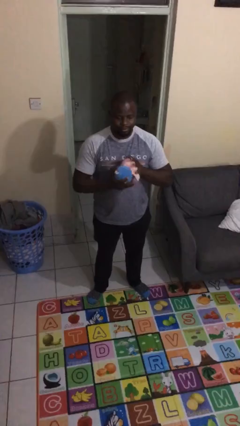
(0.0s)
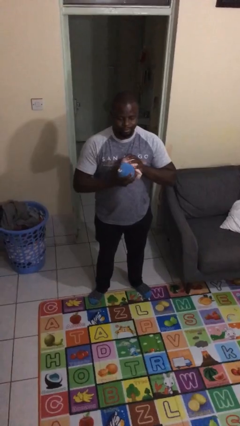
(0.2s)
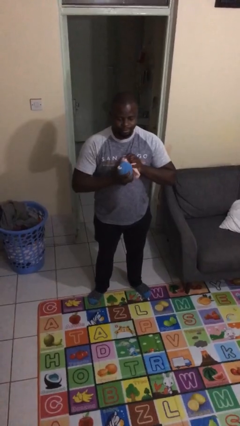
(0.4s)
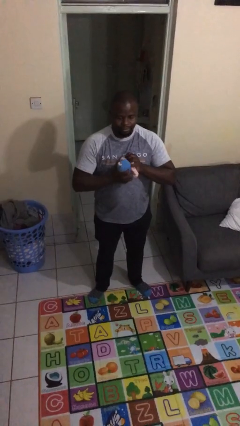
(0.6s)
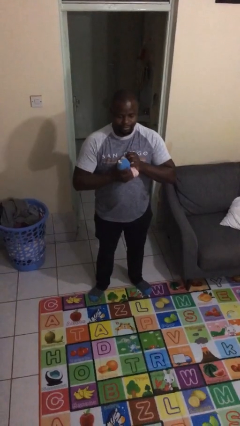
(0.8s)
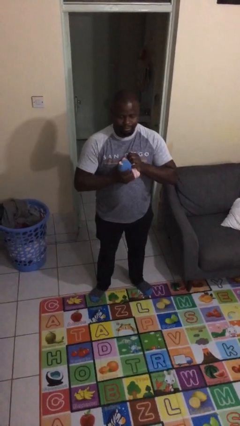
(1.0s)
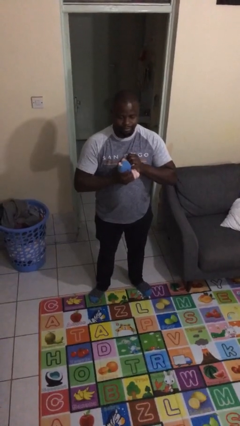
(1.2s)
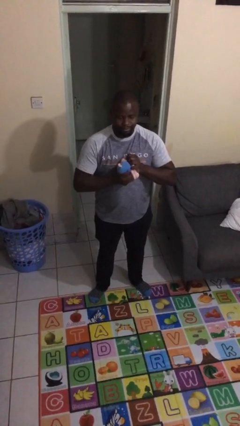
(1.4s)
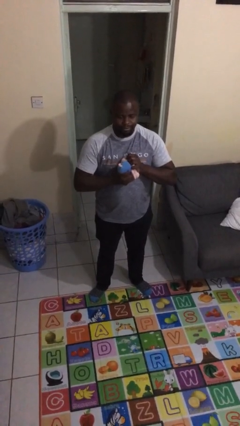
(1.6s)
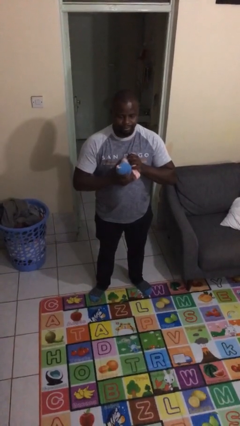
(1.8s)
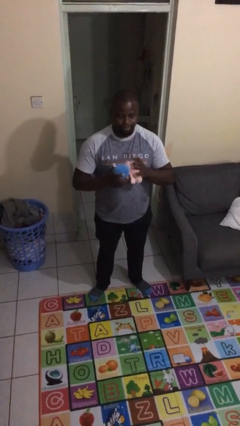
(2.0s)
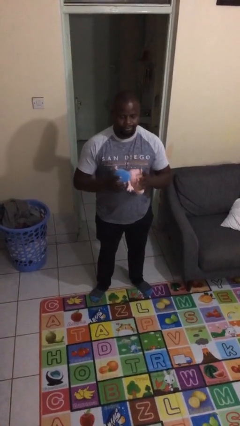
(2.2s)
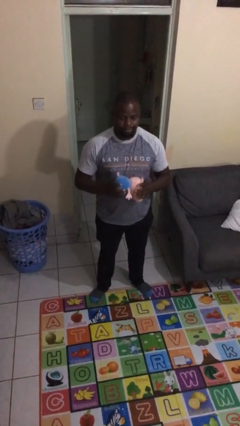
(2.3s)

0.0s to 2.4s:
person squeezes object

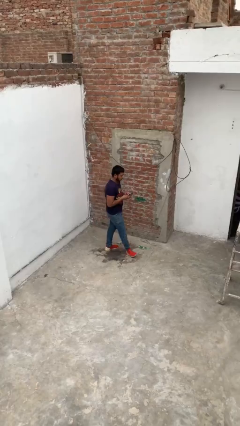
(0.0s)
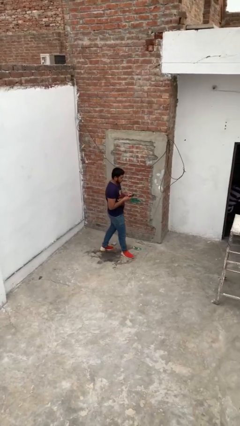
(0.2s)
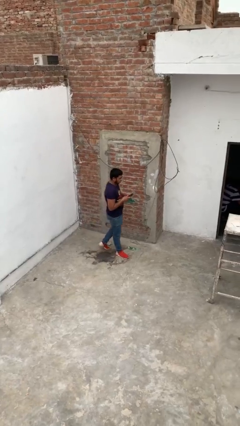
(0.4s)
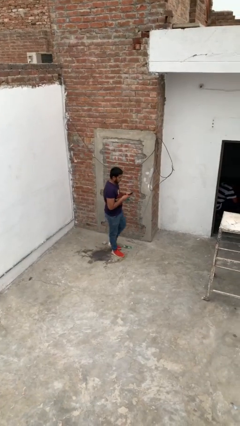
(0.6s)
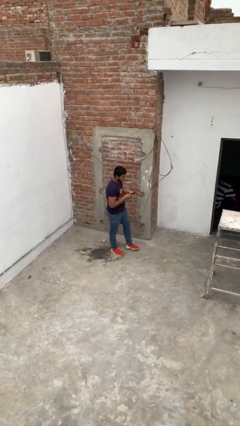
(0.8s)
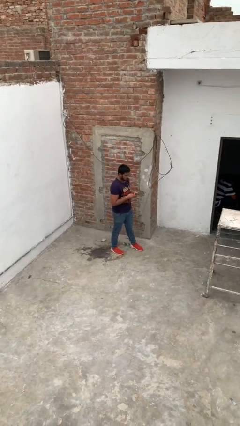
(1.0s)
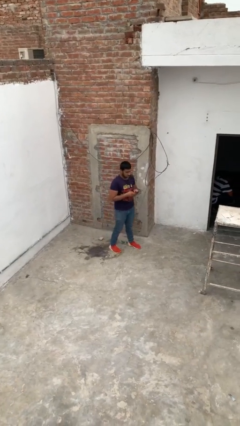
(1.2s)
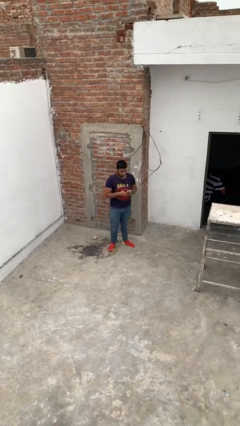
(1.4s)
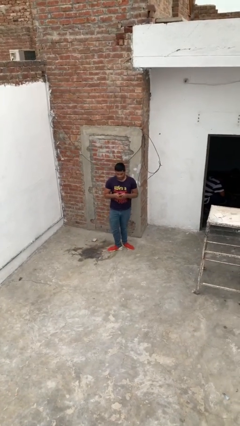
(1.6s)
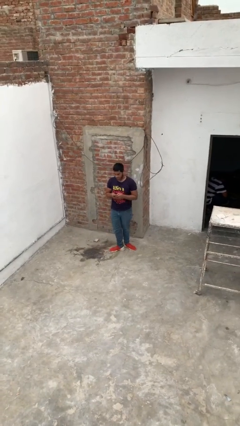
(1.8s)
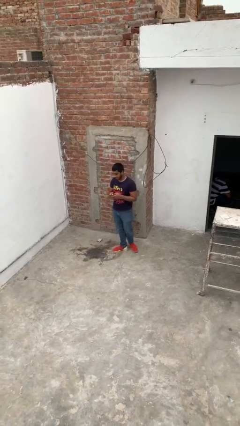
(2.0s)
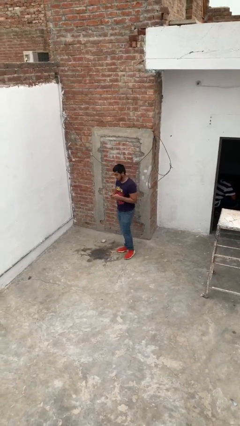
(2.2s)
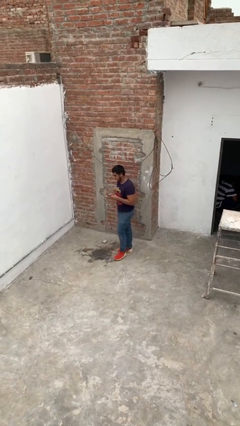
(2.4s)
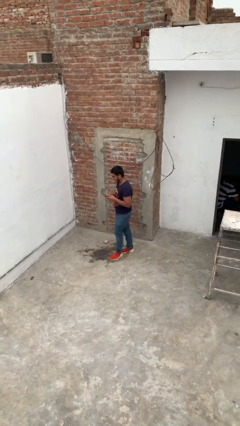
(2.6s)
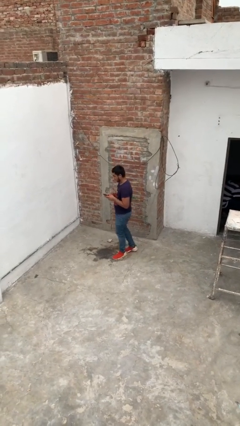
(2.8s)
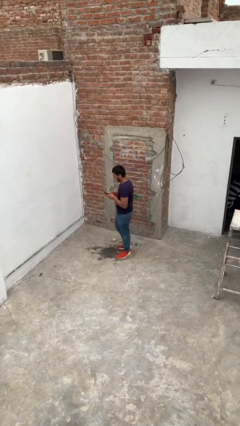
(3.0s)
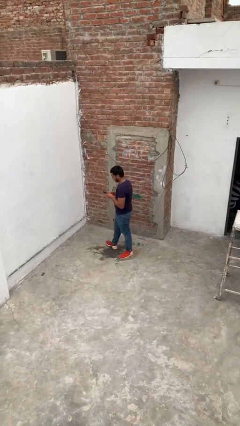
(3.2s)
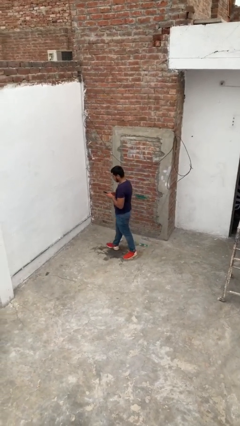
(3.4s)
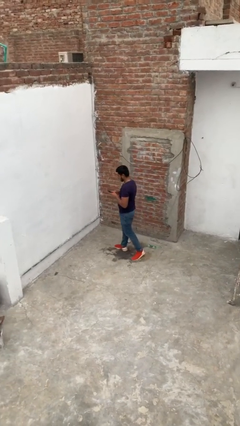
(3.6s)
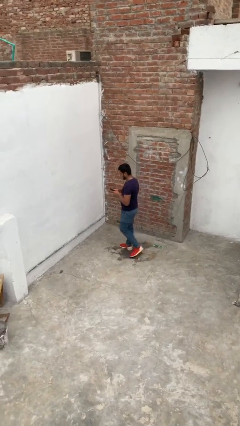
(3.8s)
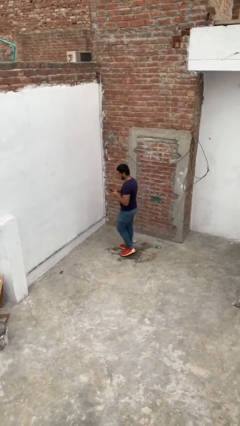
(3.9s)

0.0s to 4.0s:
person texts on phone

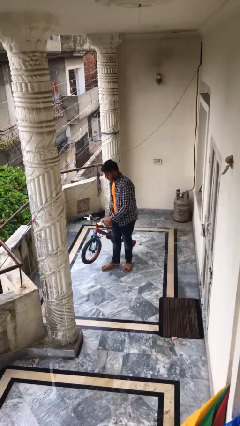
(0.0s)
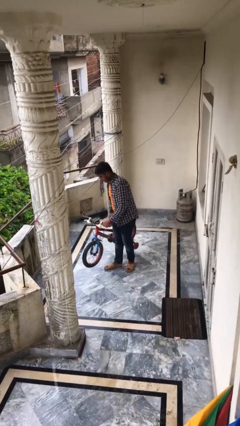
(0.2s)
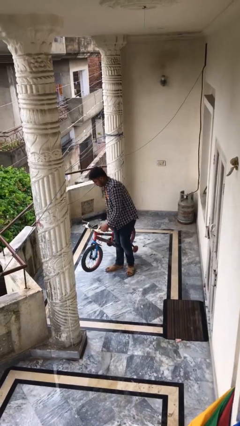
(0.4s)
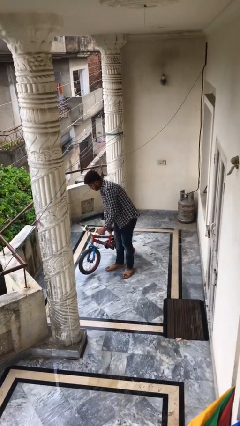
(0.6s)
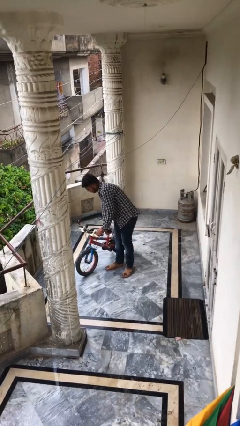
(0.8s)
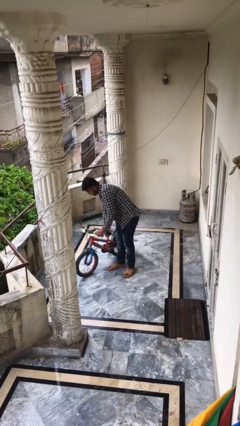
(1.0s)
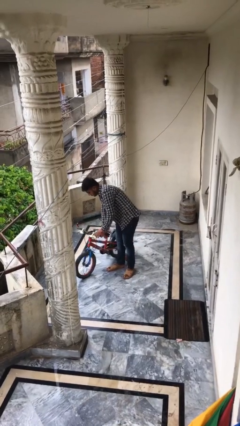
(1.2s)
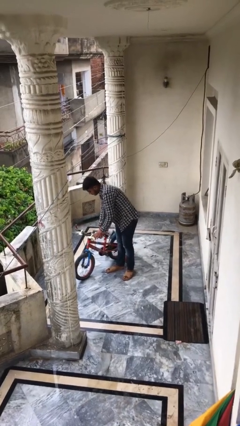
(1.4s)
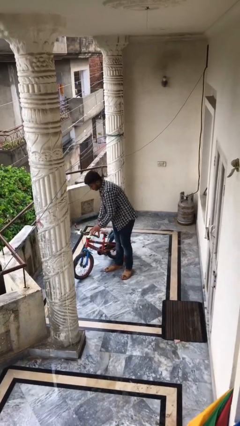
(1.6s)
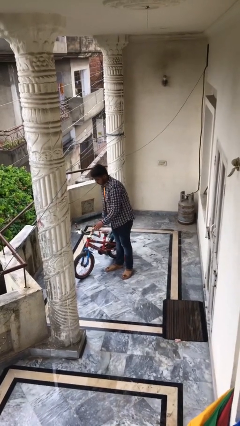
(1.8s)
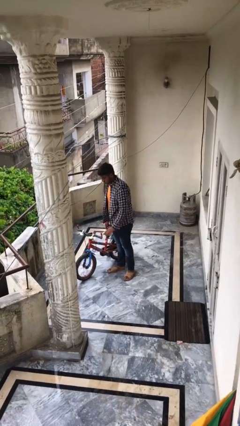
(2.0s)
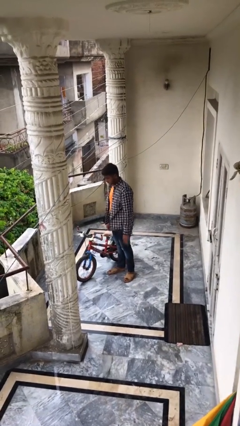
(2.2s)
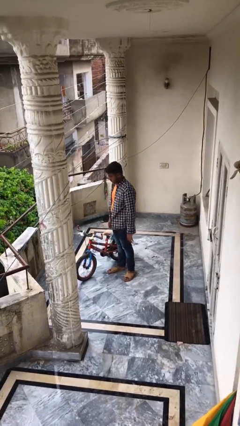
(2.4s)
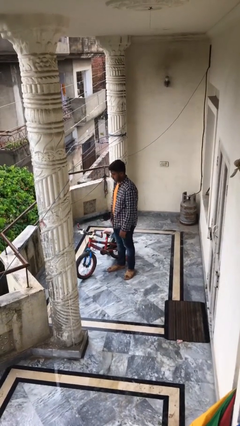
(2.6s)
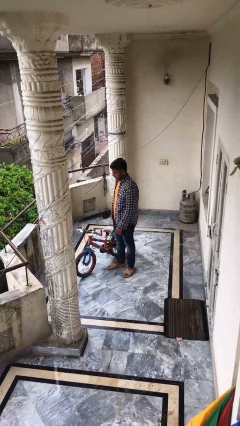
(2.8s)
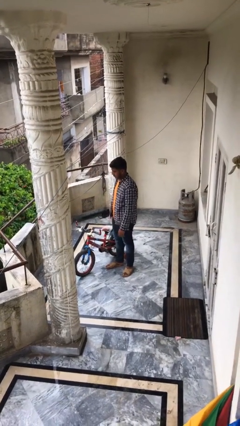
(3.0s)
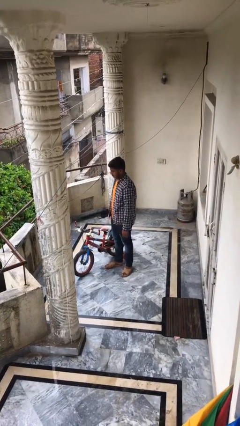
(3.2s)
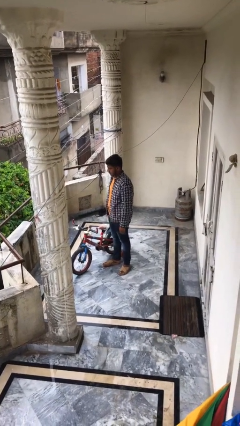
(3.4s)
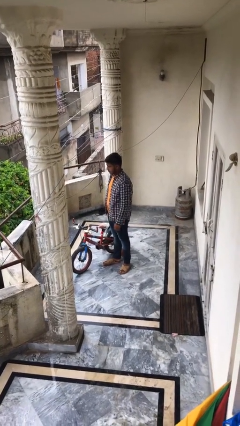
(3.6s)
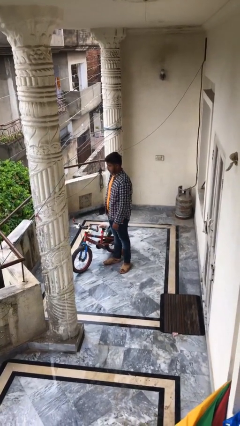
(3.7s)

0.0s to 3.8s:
person puts down object on floor

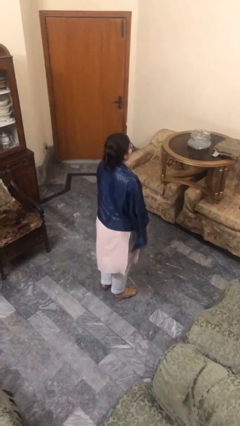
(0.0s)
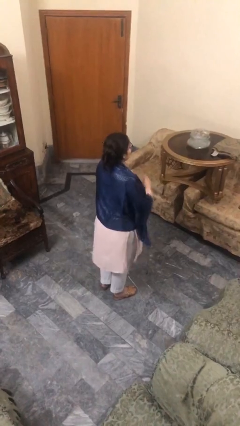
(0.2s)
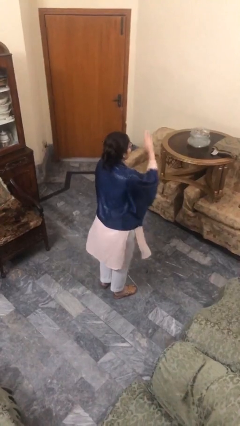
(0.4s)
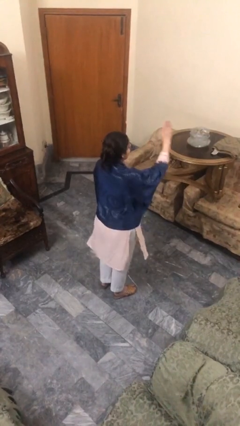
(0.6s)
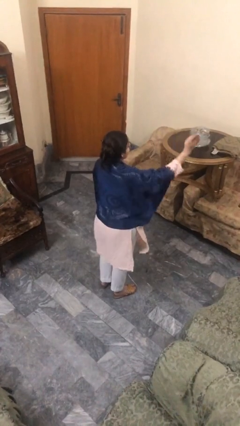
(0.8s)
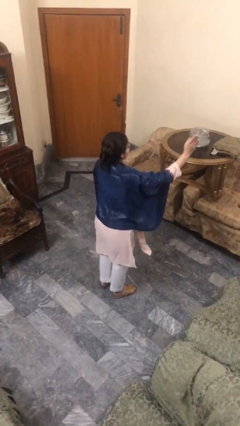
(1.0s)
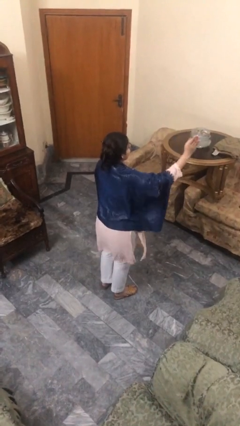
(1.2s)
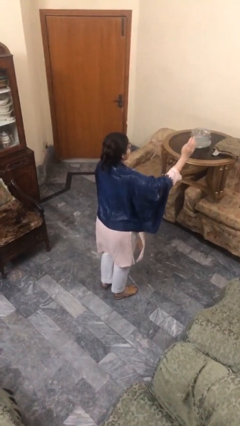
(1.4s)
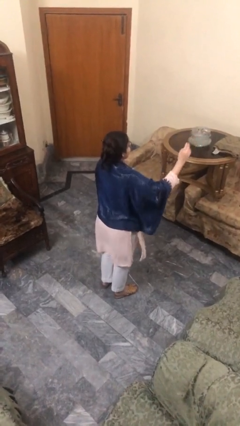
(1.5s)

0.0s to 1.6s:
person gestures swipe right

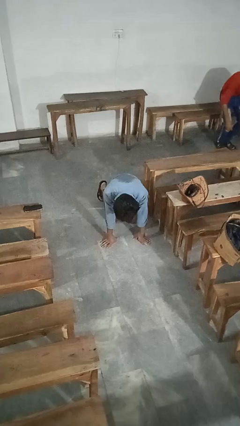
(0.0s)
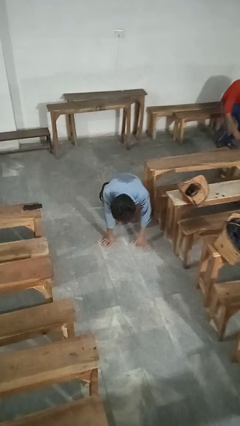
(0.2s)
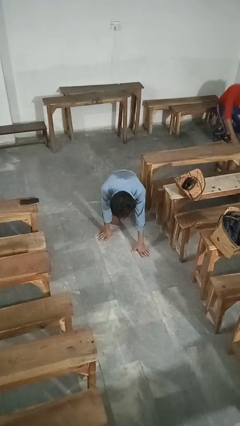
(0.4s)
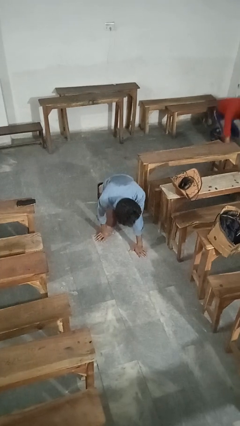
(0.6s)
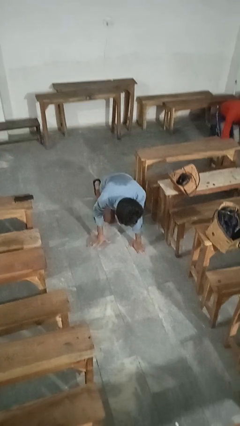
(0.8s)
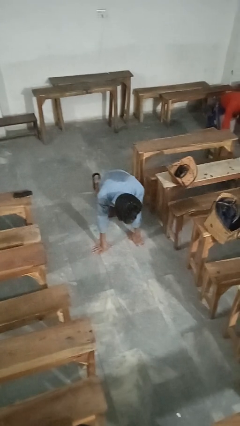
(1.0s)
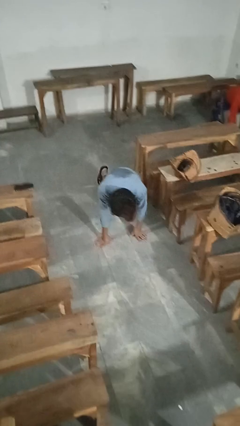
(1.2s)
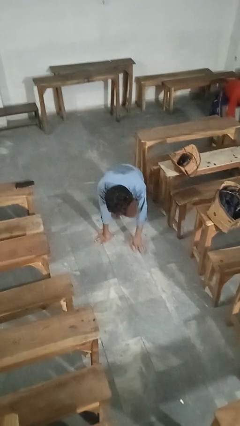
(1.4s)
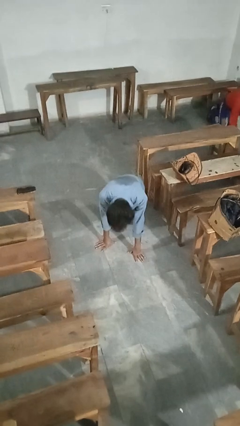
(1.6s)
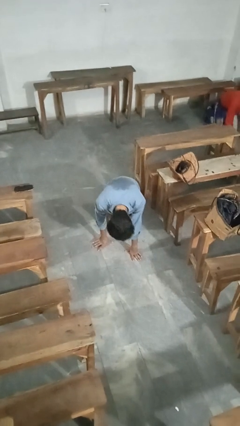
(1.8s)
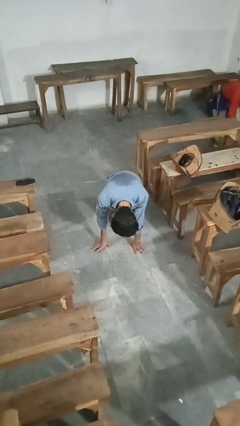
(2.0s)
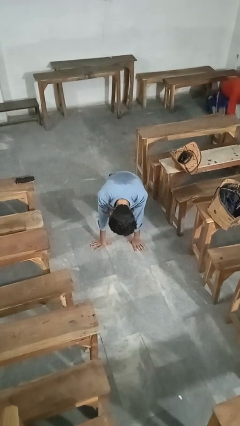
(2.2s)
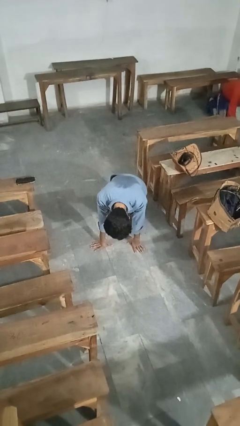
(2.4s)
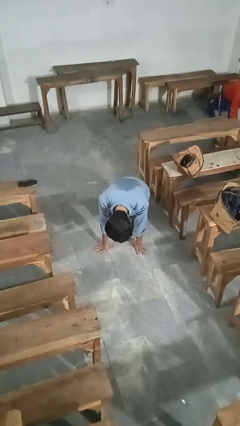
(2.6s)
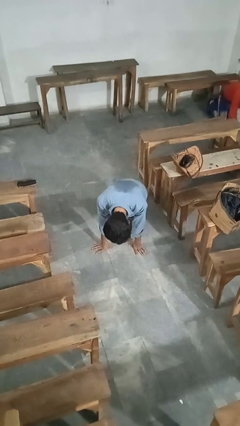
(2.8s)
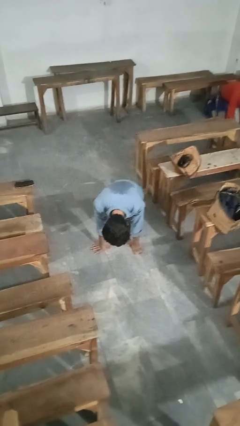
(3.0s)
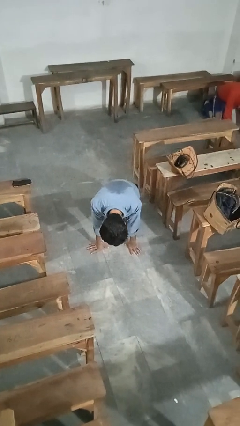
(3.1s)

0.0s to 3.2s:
person crawls

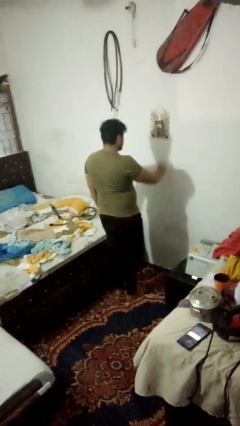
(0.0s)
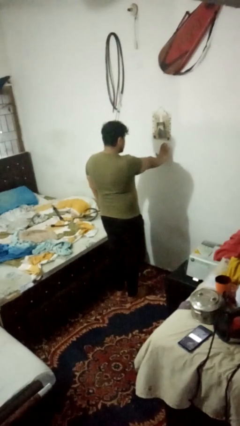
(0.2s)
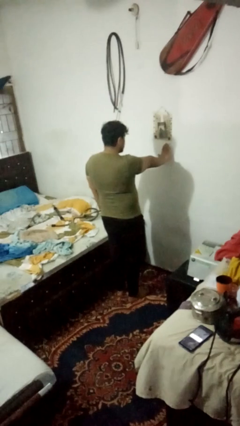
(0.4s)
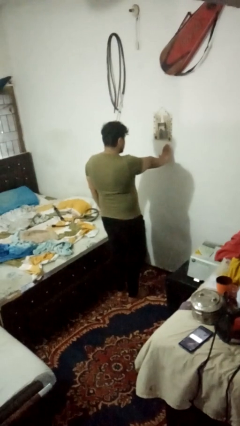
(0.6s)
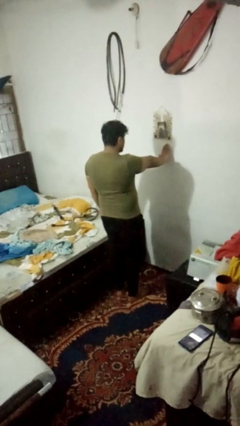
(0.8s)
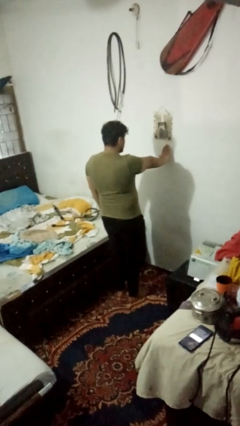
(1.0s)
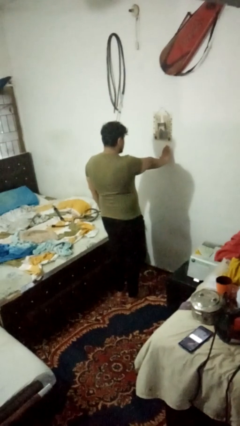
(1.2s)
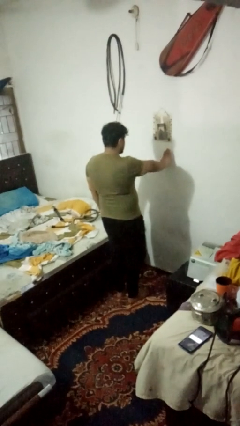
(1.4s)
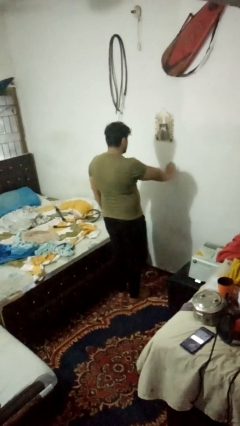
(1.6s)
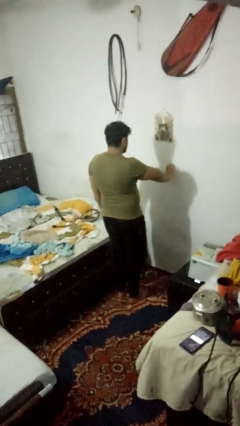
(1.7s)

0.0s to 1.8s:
person gestures stop

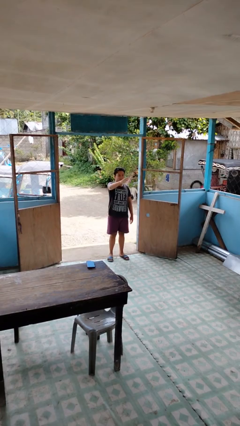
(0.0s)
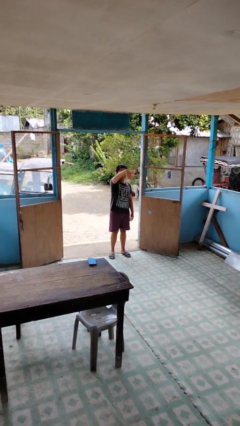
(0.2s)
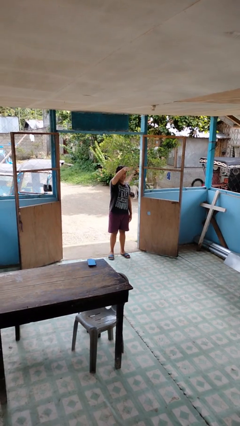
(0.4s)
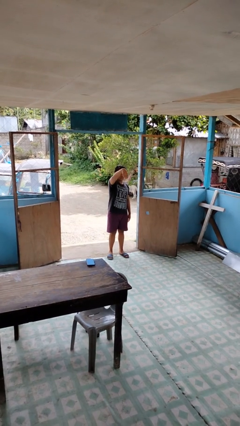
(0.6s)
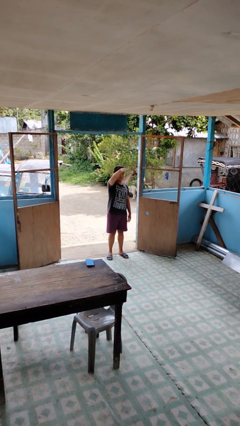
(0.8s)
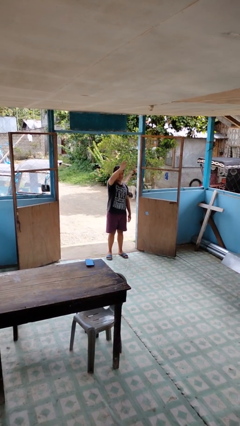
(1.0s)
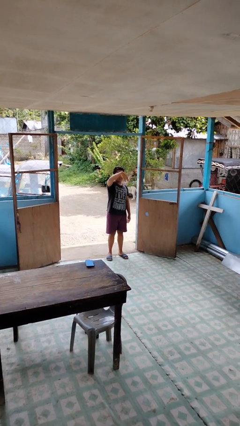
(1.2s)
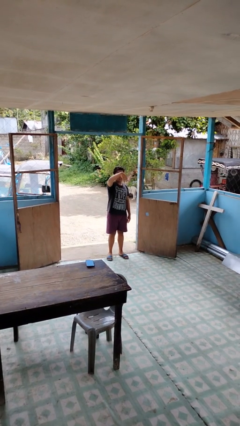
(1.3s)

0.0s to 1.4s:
person gestures come here
